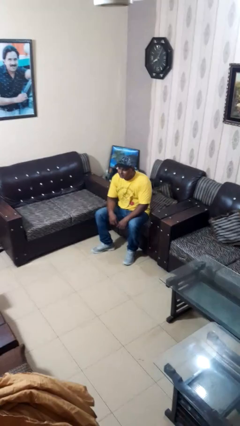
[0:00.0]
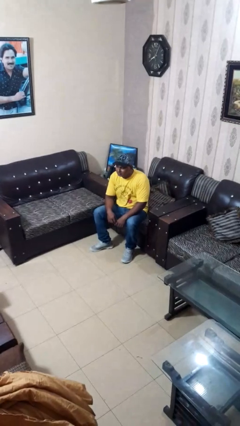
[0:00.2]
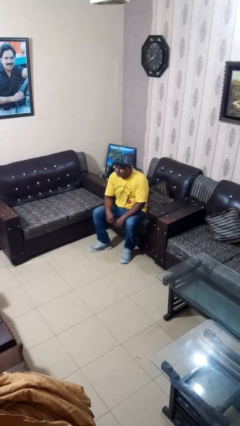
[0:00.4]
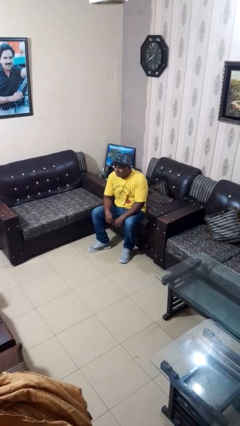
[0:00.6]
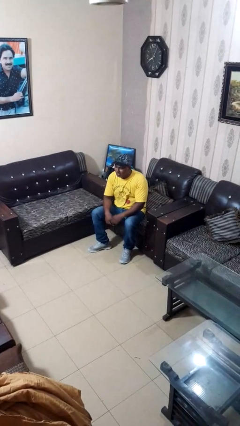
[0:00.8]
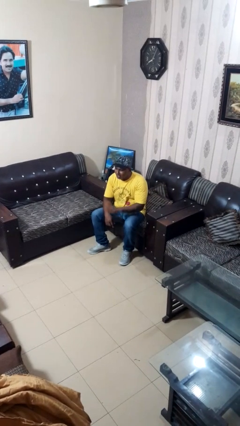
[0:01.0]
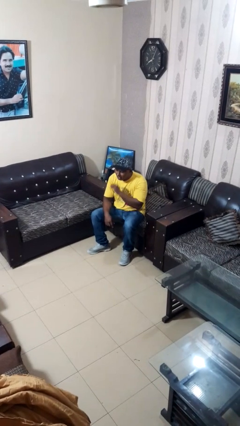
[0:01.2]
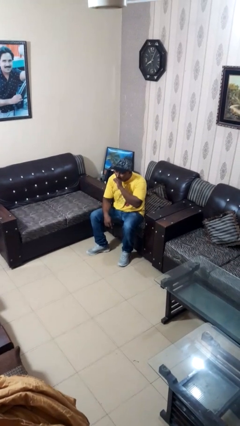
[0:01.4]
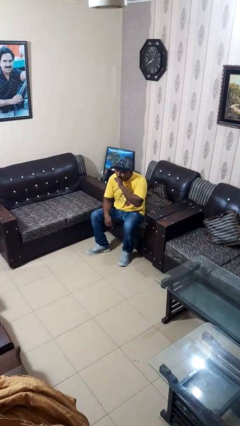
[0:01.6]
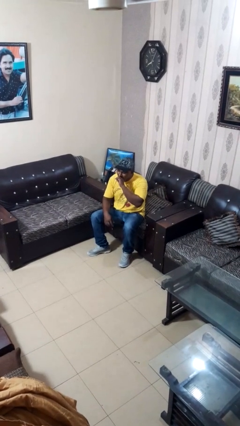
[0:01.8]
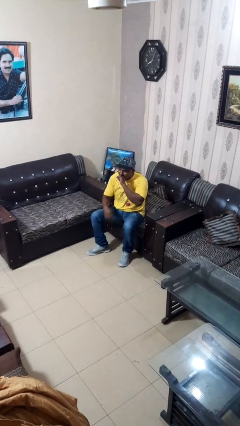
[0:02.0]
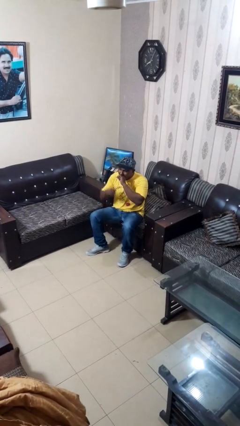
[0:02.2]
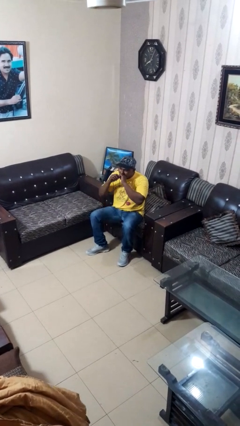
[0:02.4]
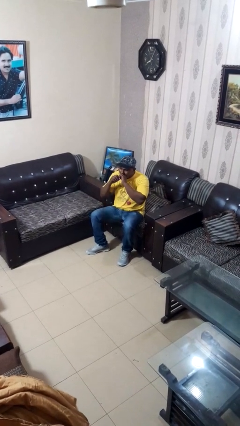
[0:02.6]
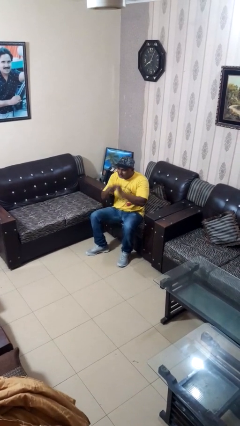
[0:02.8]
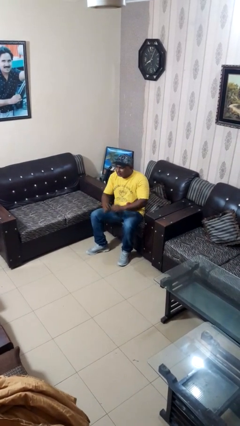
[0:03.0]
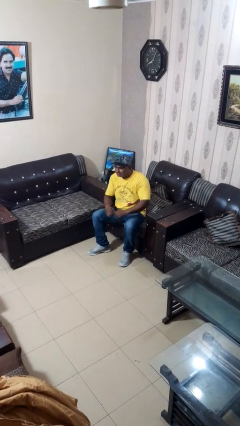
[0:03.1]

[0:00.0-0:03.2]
person yawns

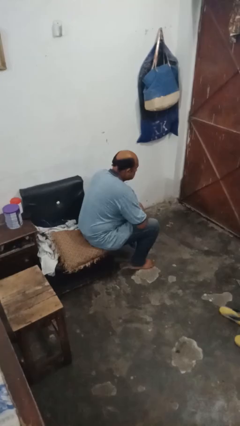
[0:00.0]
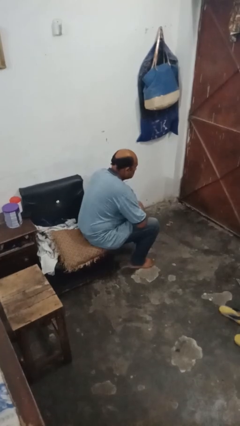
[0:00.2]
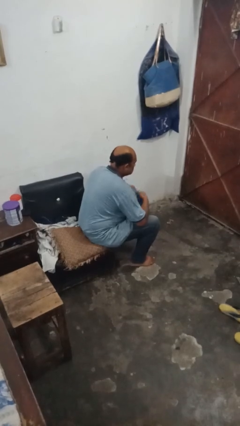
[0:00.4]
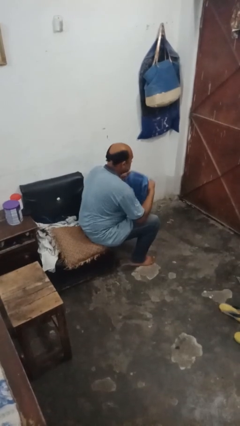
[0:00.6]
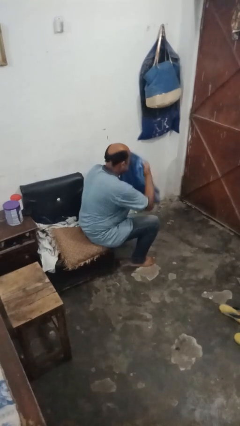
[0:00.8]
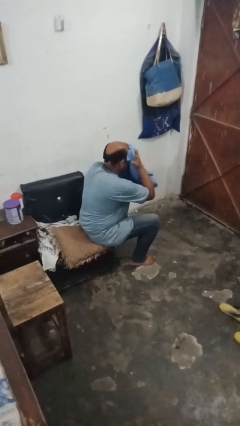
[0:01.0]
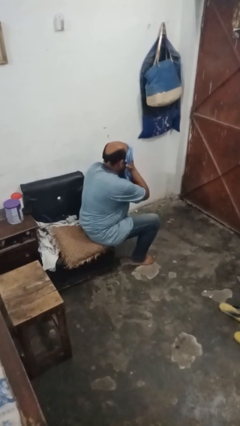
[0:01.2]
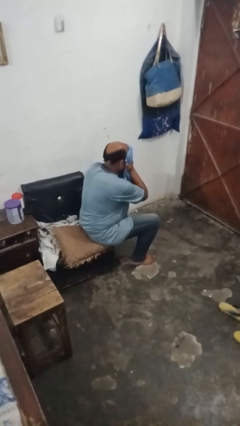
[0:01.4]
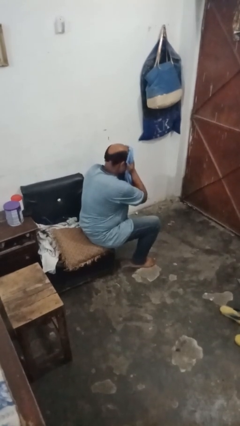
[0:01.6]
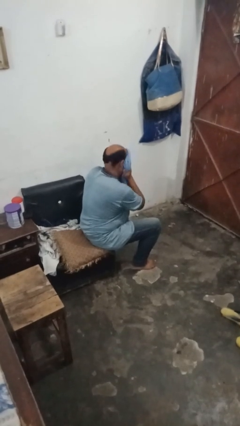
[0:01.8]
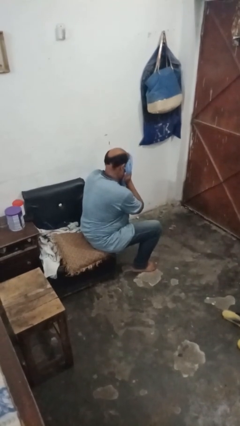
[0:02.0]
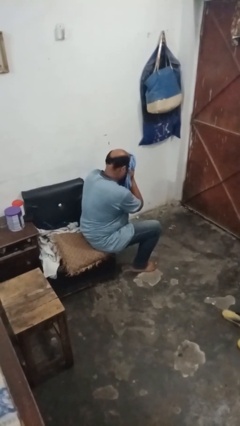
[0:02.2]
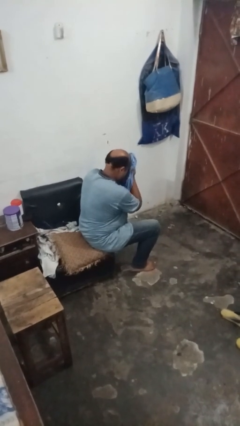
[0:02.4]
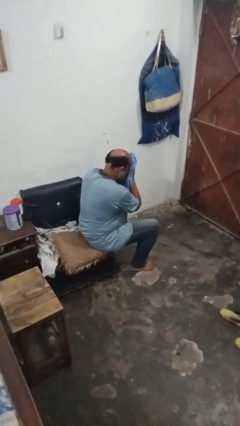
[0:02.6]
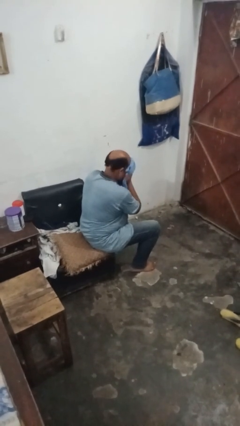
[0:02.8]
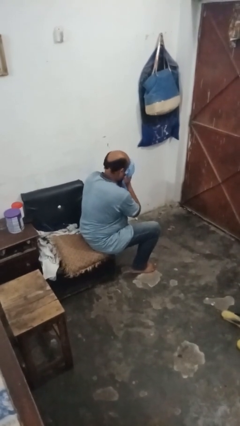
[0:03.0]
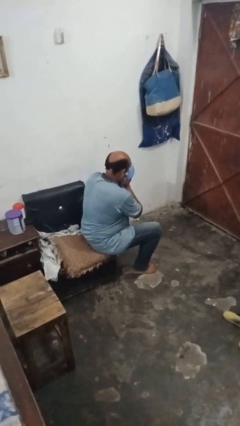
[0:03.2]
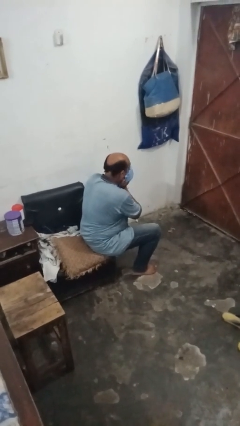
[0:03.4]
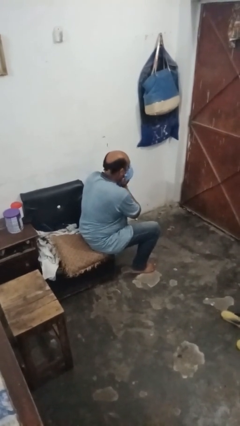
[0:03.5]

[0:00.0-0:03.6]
person wipes mouth with napkin

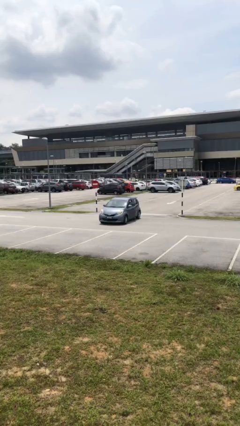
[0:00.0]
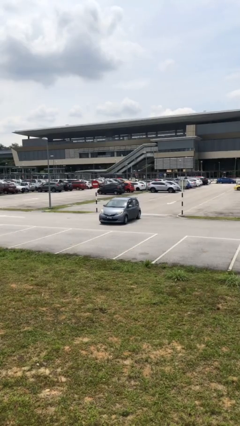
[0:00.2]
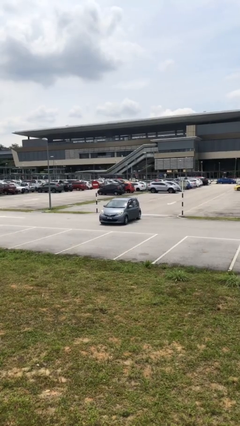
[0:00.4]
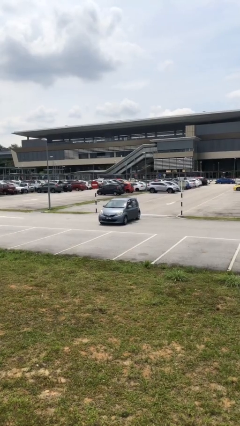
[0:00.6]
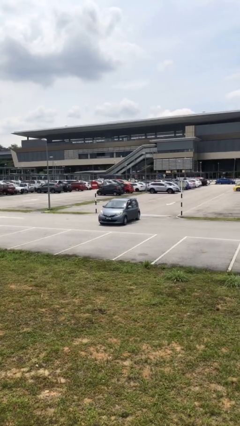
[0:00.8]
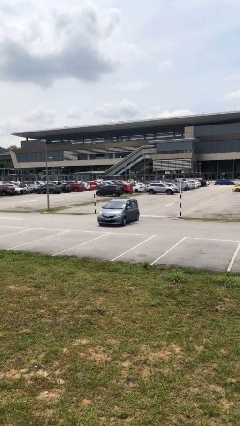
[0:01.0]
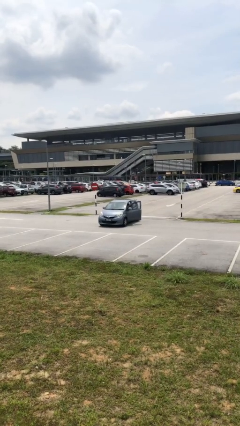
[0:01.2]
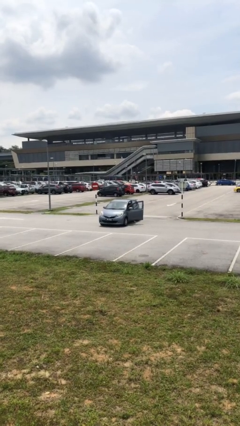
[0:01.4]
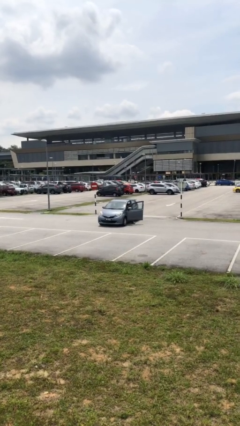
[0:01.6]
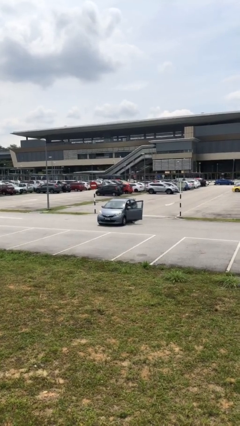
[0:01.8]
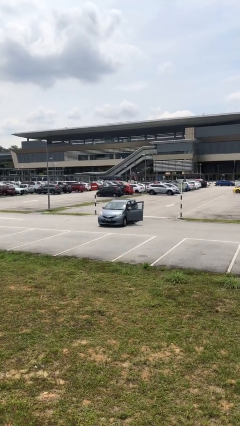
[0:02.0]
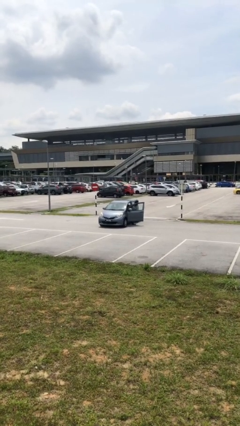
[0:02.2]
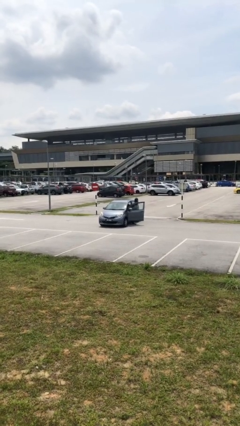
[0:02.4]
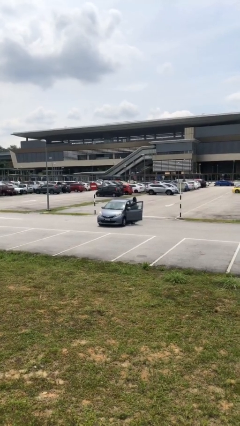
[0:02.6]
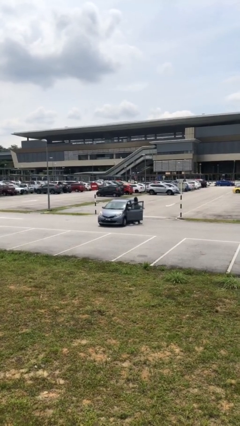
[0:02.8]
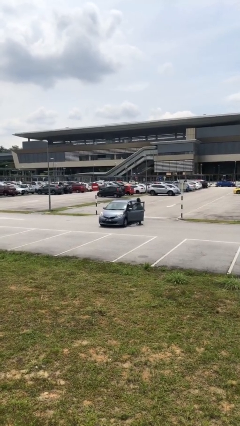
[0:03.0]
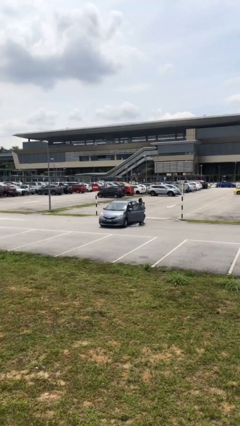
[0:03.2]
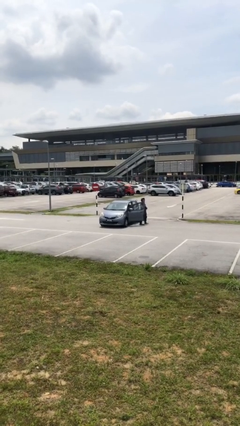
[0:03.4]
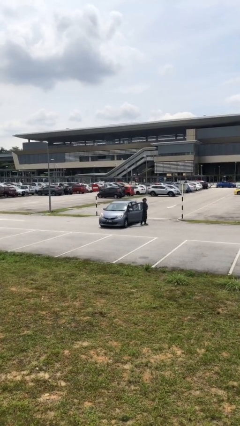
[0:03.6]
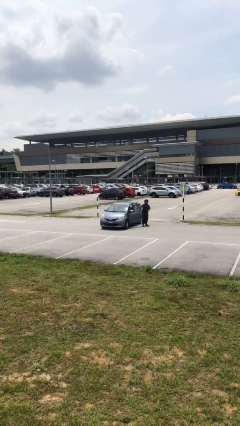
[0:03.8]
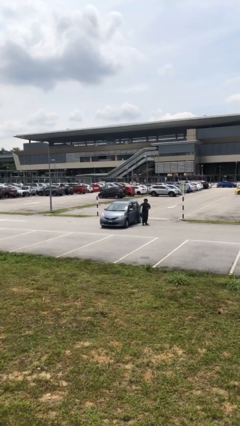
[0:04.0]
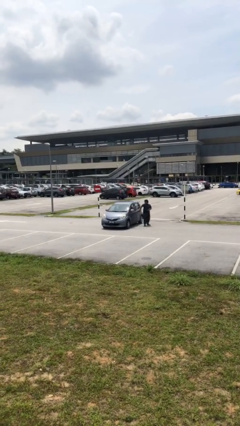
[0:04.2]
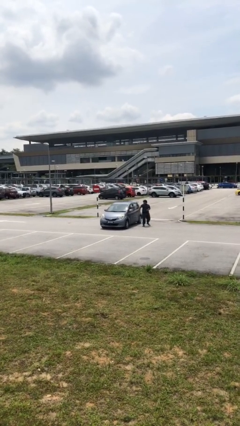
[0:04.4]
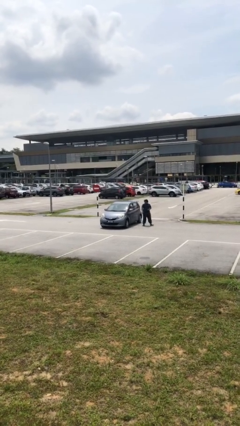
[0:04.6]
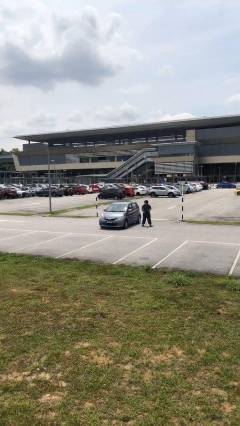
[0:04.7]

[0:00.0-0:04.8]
car drops off person

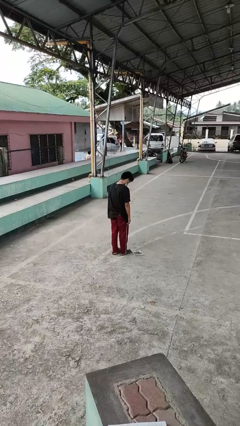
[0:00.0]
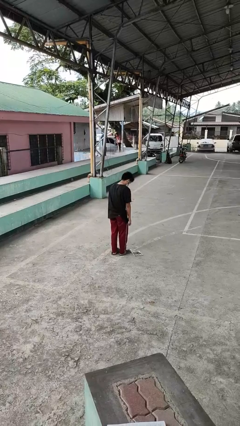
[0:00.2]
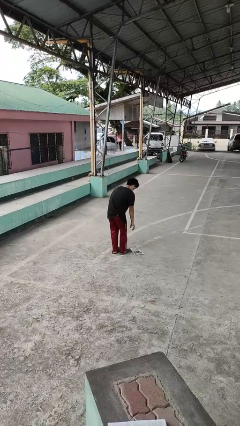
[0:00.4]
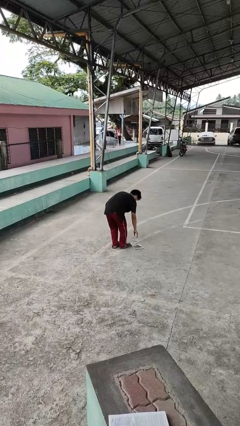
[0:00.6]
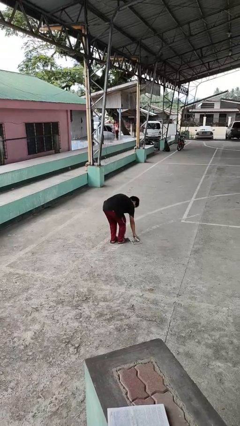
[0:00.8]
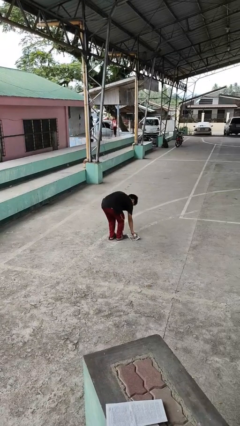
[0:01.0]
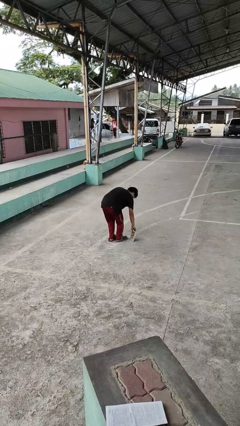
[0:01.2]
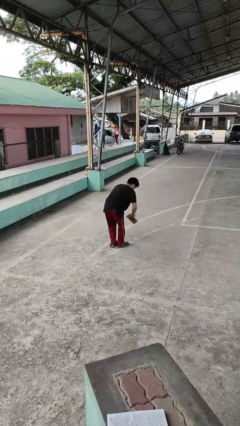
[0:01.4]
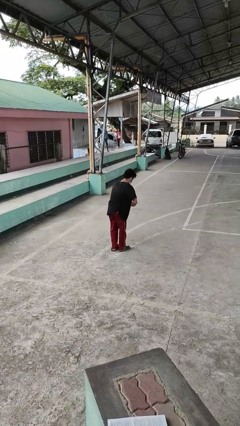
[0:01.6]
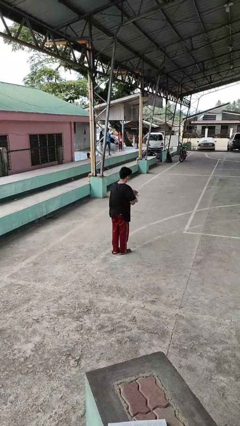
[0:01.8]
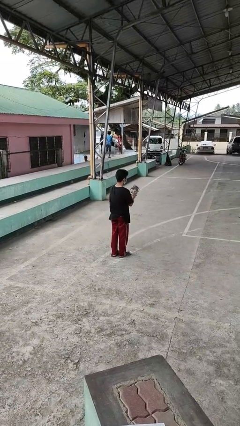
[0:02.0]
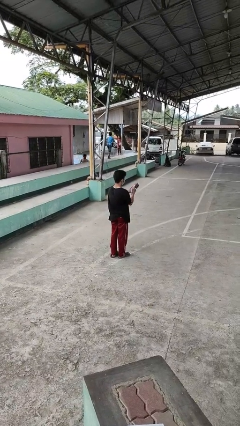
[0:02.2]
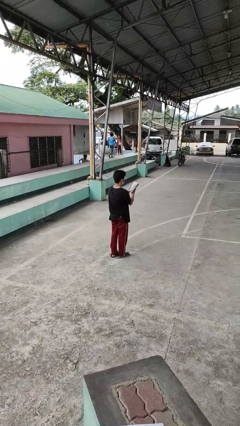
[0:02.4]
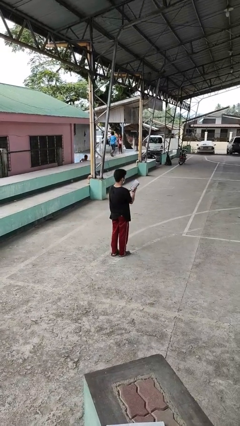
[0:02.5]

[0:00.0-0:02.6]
person picks up object from floor

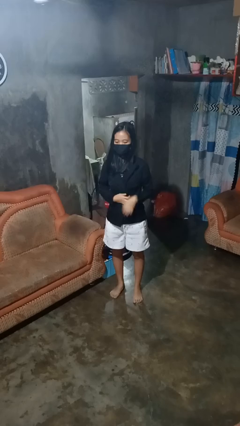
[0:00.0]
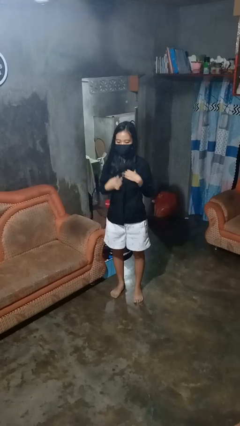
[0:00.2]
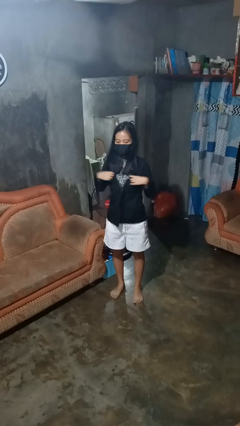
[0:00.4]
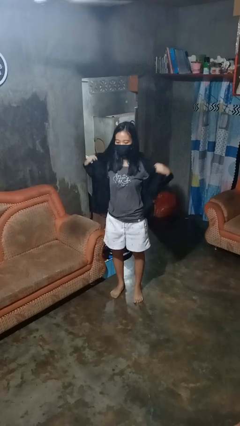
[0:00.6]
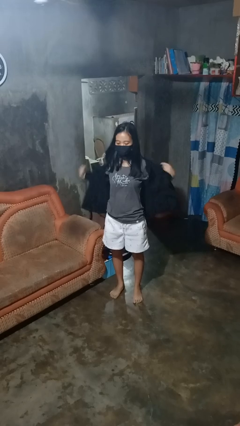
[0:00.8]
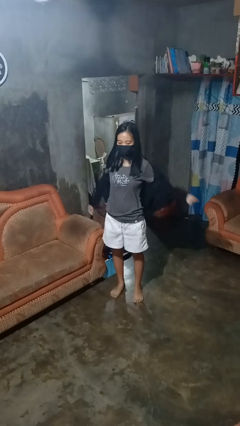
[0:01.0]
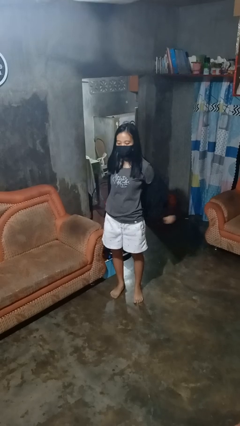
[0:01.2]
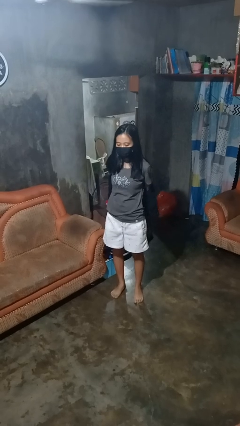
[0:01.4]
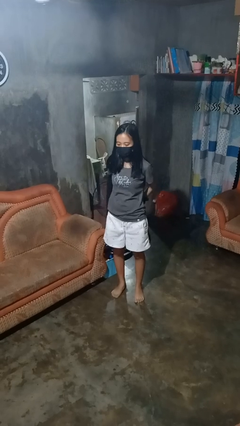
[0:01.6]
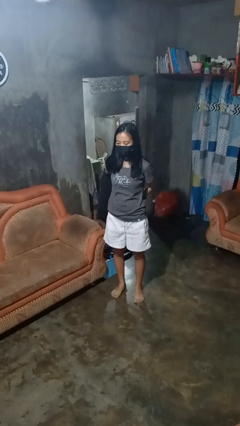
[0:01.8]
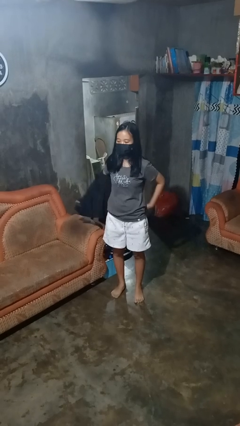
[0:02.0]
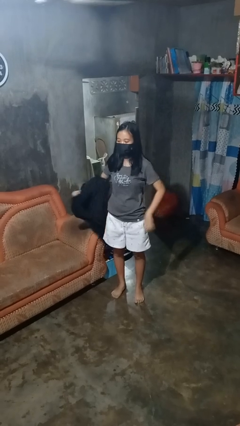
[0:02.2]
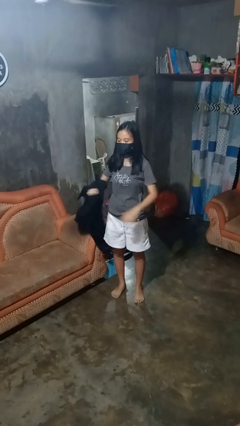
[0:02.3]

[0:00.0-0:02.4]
person takes off shirt

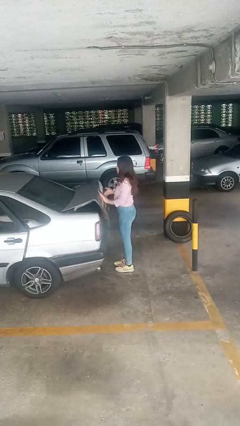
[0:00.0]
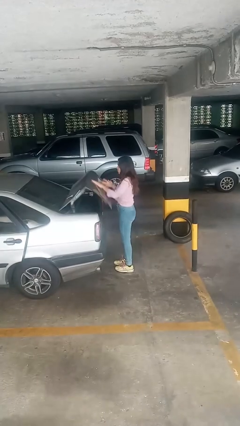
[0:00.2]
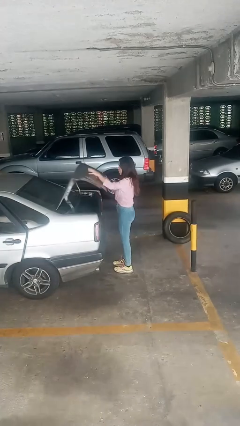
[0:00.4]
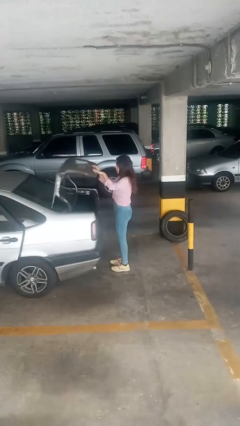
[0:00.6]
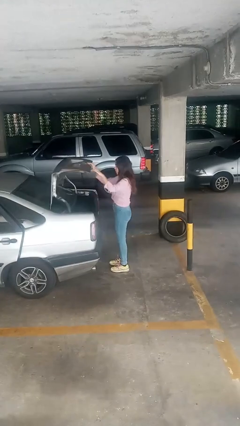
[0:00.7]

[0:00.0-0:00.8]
person opens car trunk

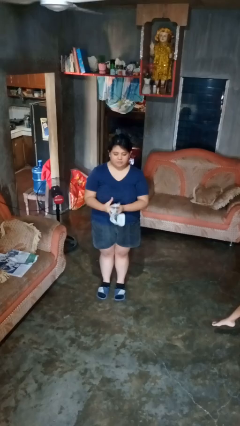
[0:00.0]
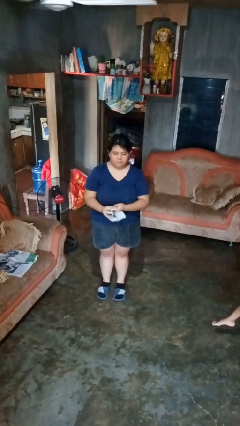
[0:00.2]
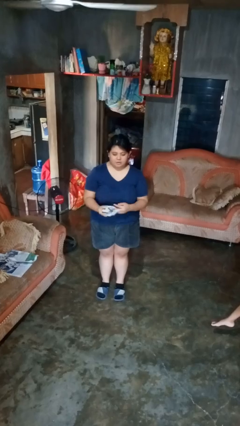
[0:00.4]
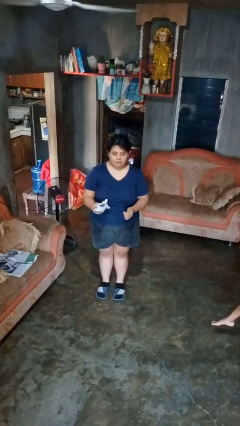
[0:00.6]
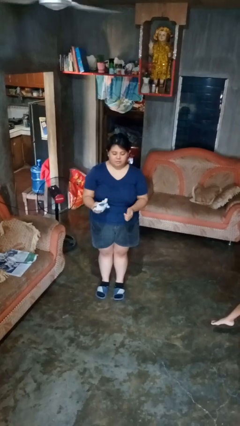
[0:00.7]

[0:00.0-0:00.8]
person crumples paper
